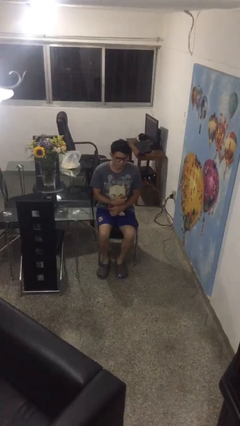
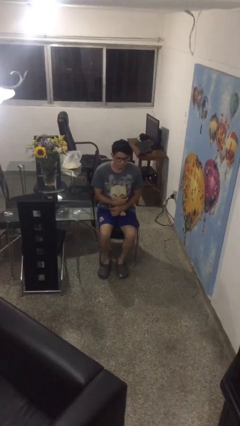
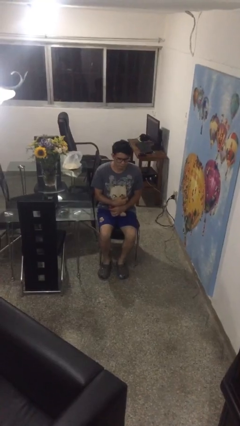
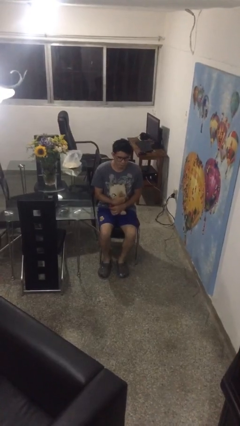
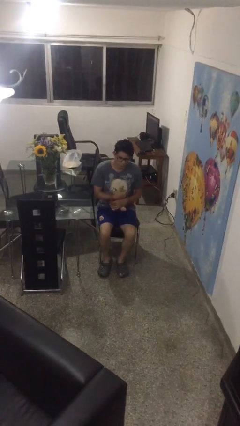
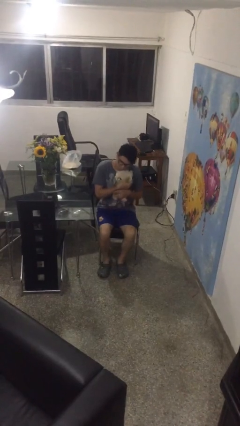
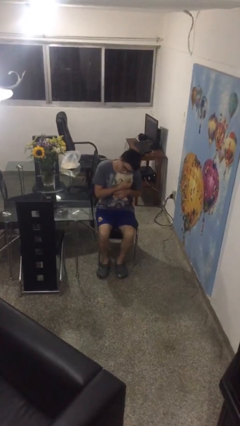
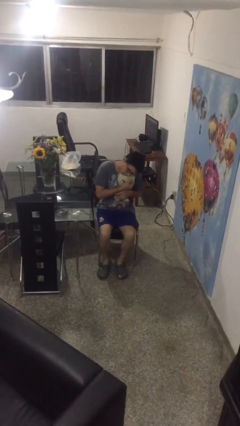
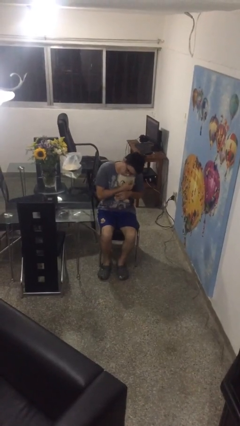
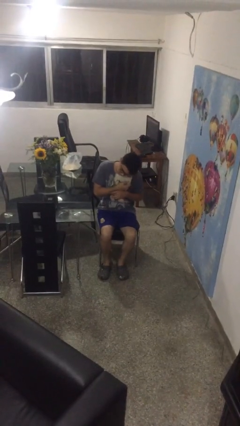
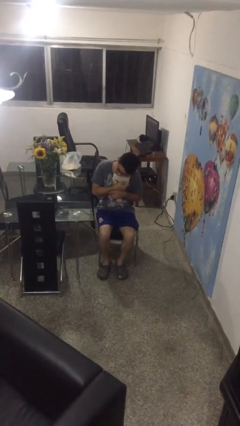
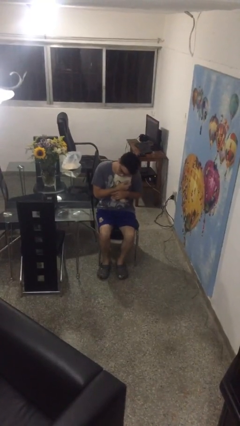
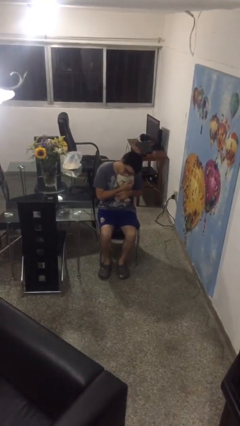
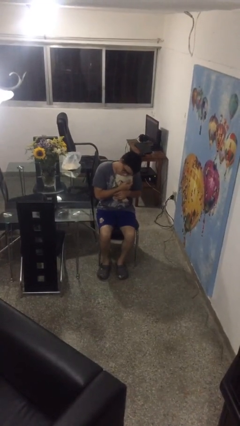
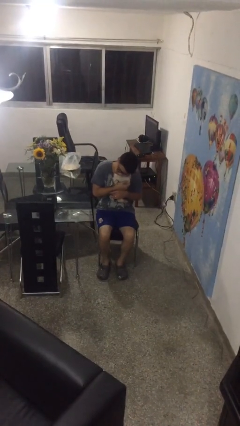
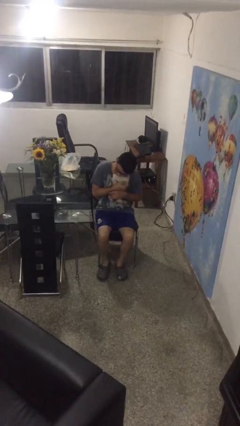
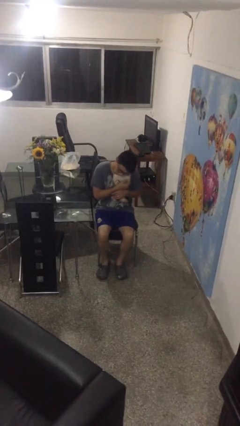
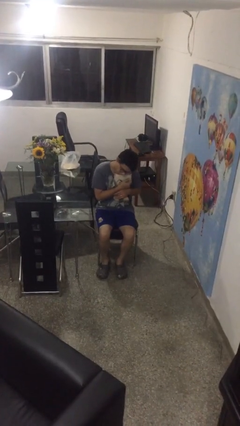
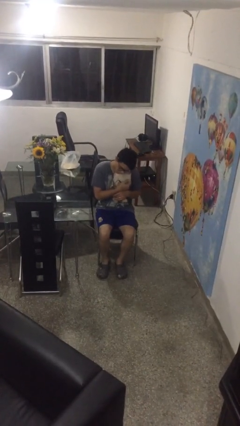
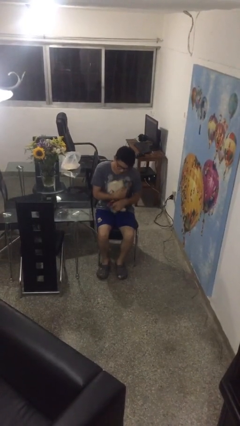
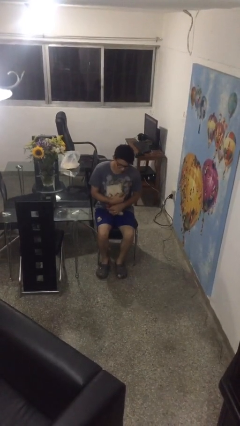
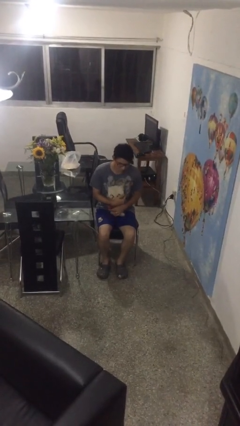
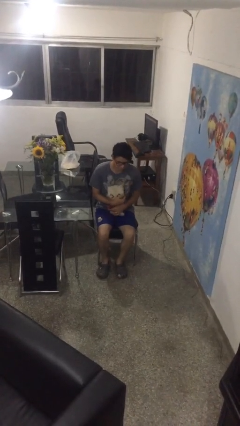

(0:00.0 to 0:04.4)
person hugs stuffed animal

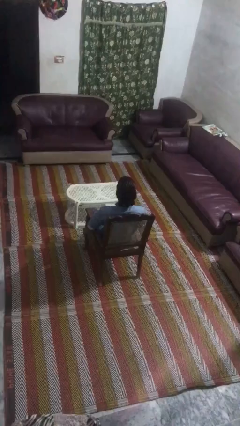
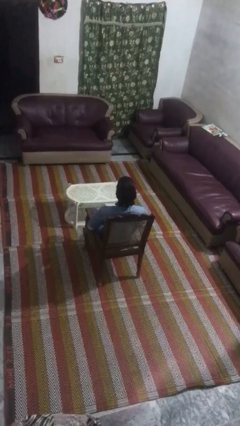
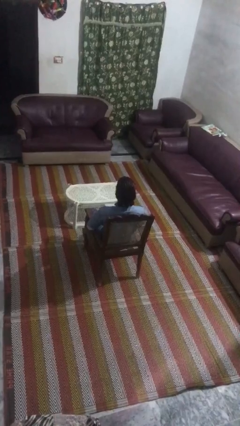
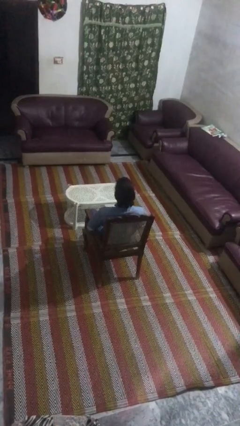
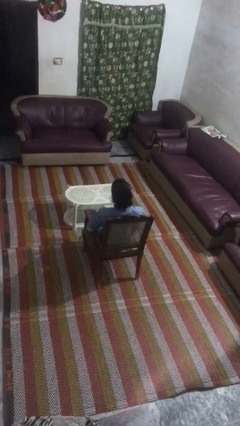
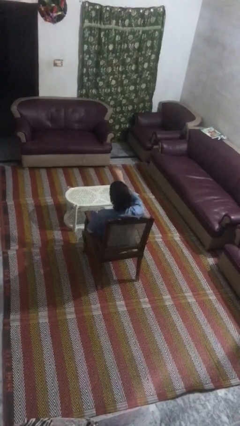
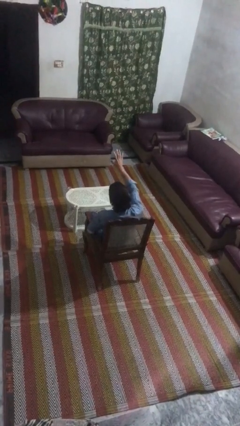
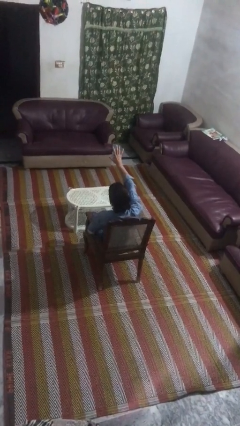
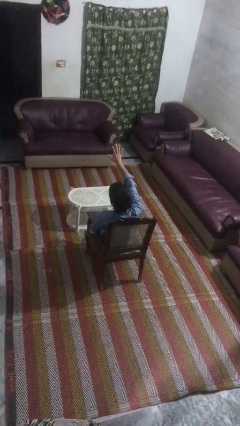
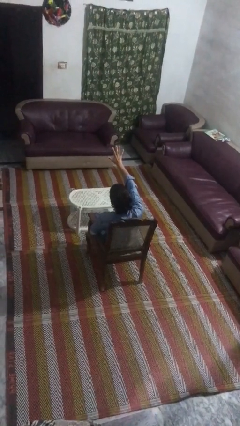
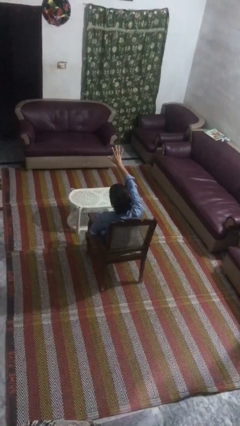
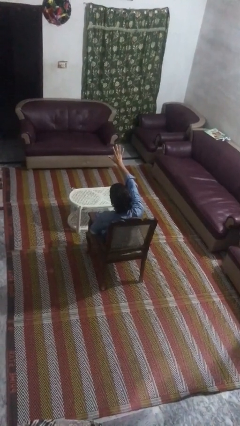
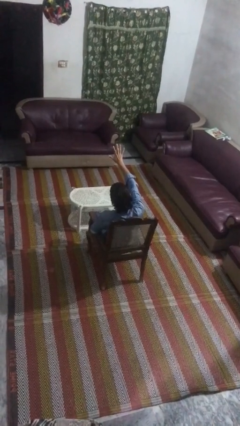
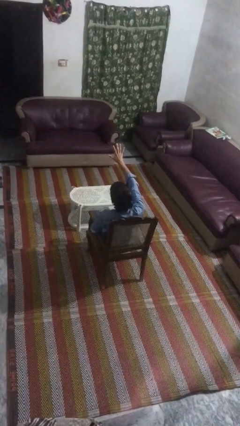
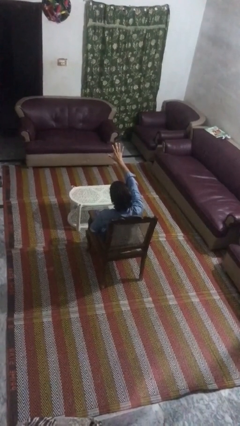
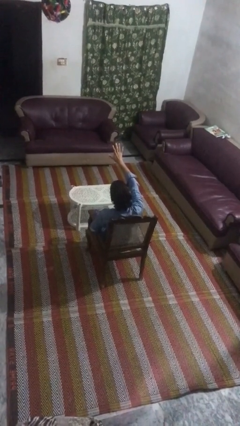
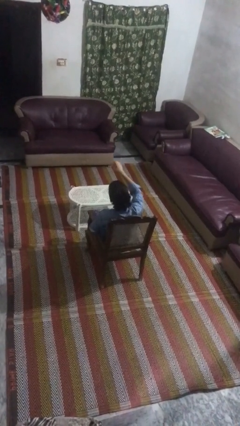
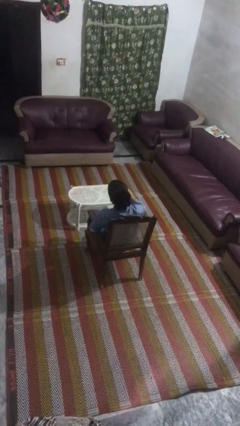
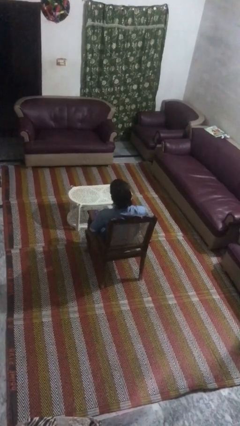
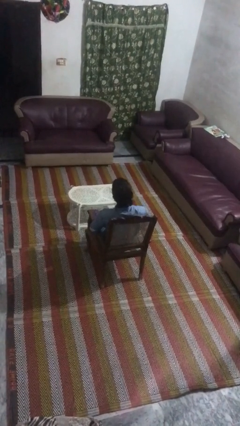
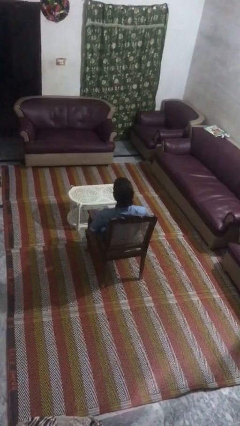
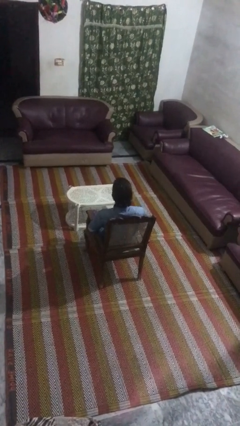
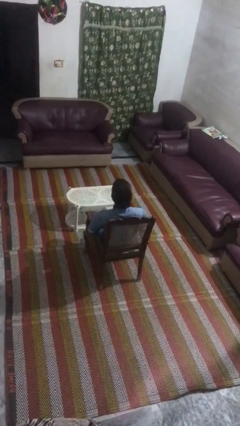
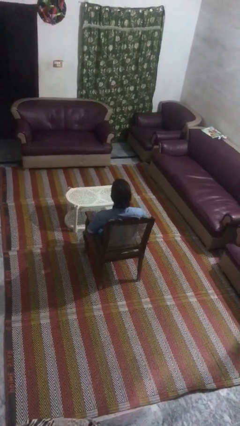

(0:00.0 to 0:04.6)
person gestures number five

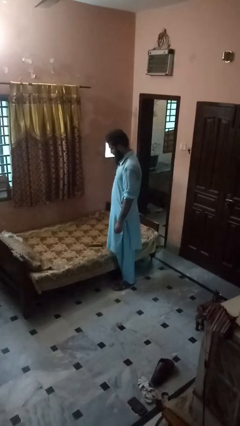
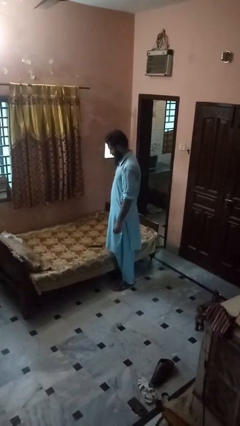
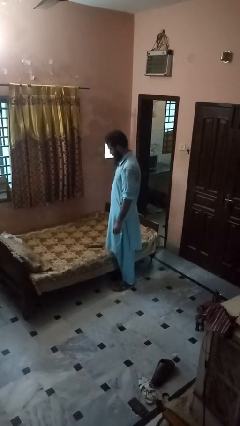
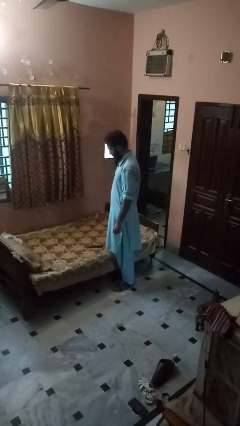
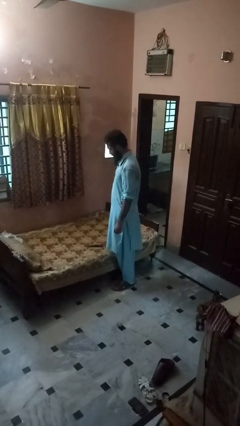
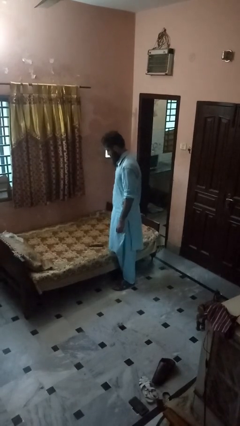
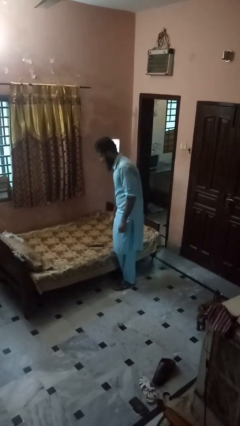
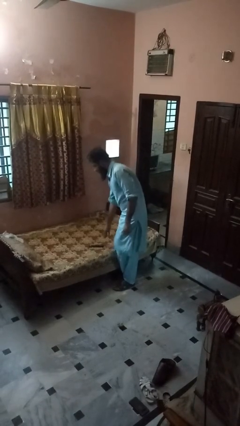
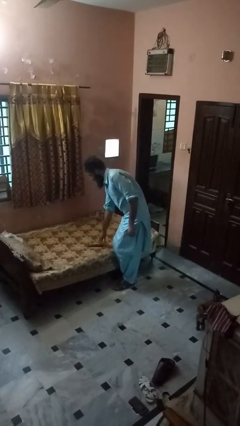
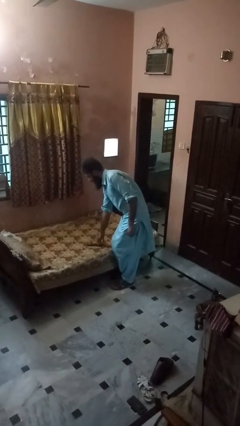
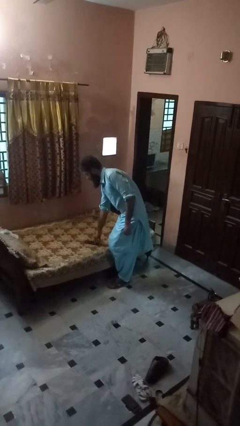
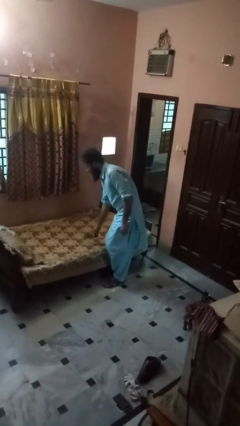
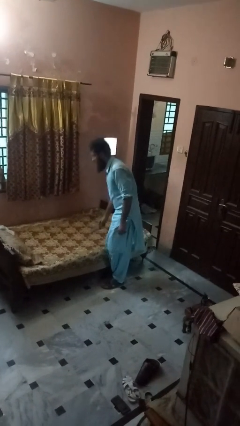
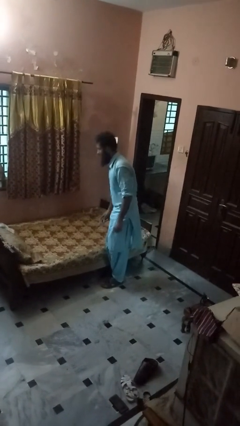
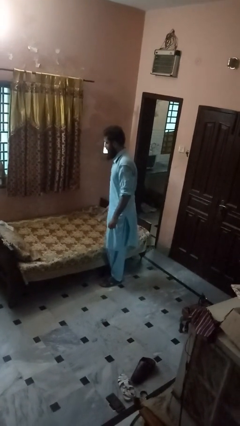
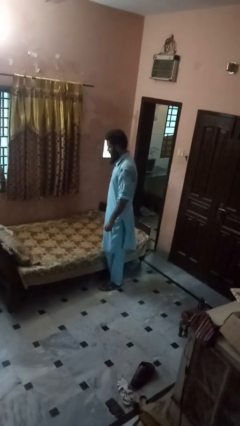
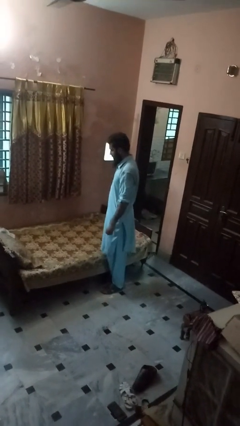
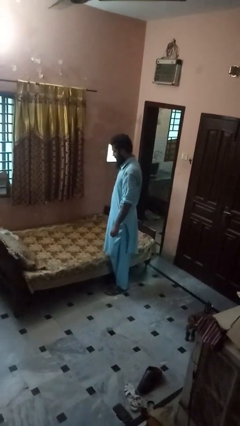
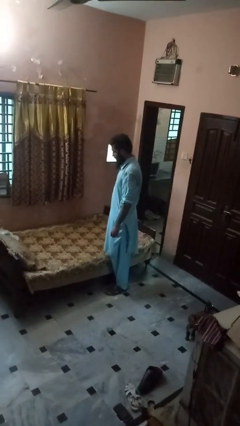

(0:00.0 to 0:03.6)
person picks up object from bed

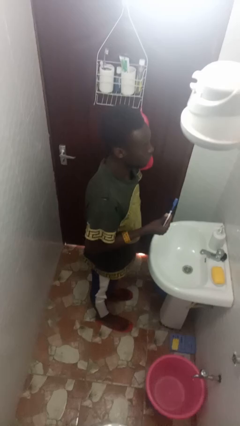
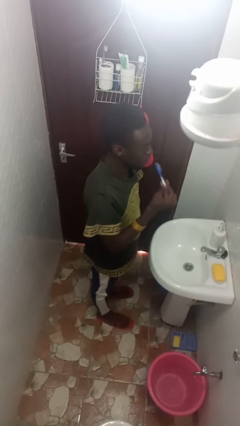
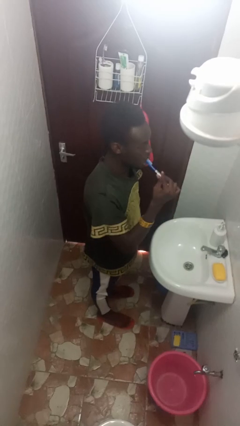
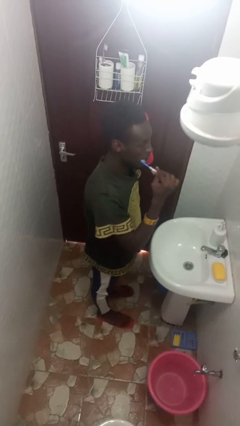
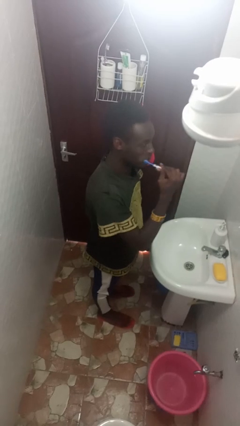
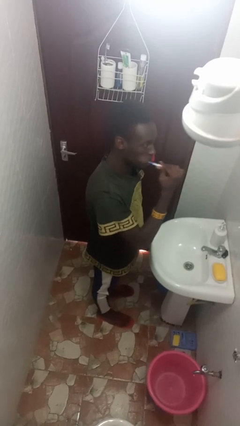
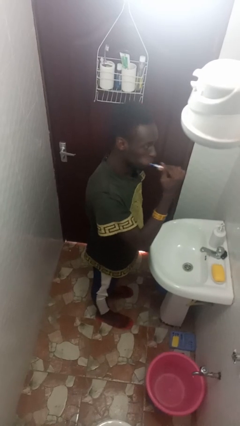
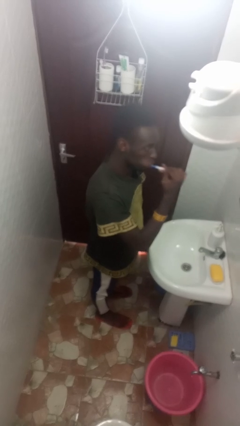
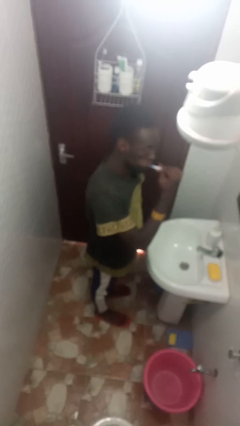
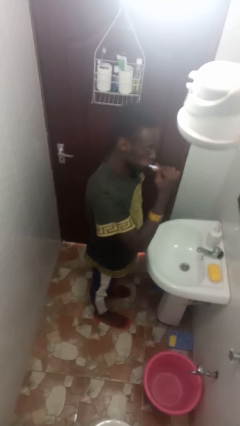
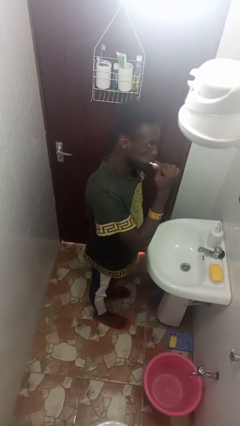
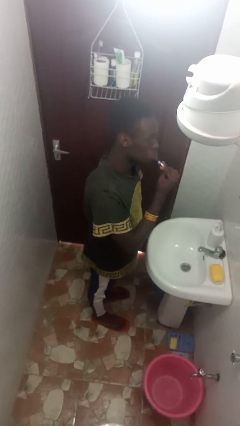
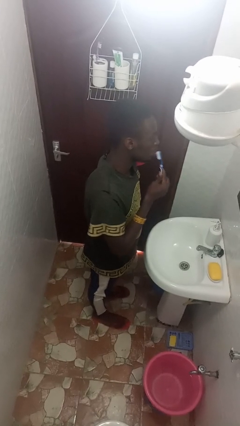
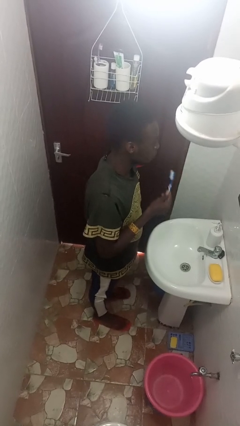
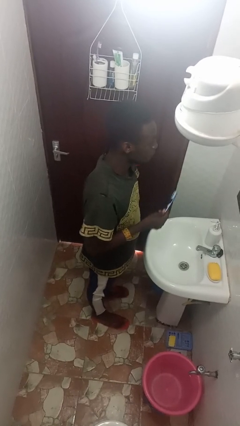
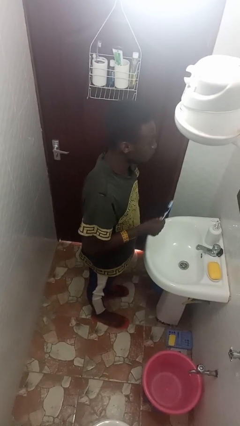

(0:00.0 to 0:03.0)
person brushes teeth

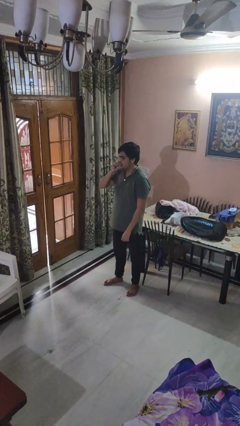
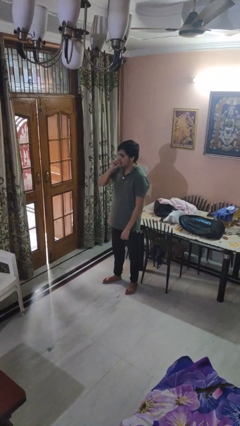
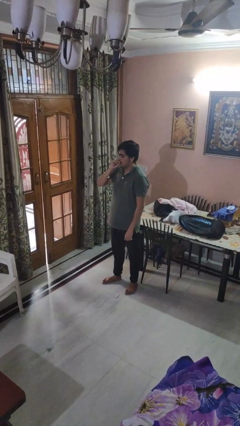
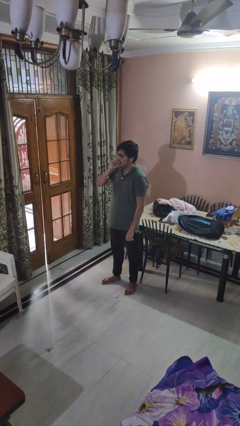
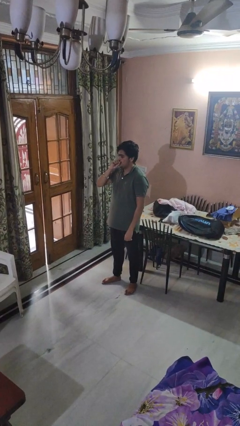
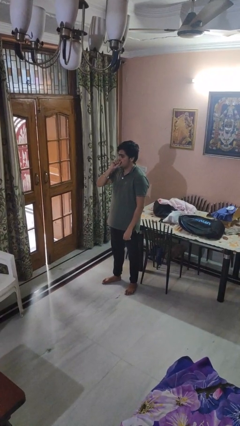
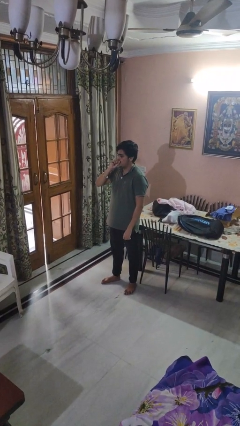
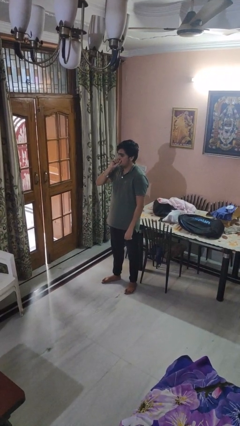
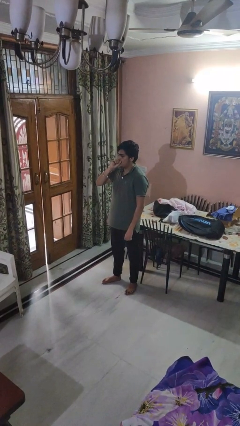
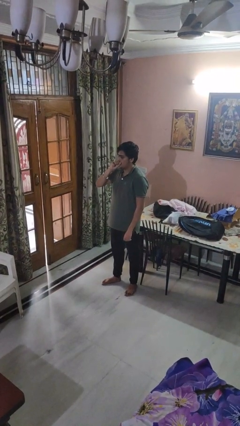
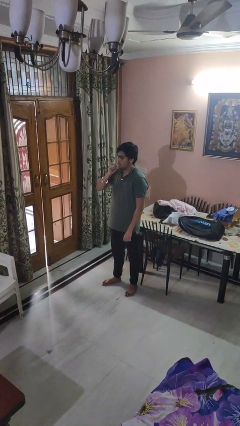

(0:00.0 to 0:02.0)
person vapes
